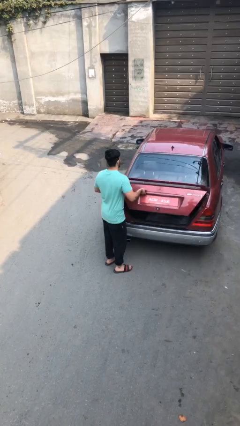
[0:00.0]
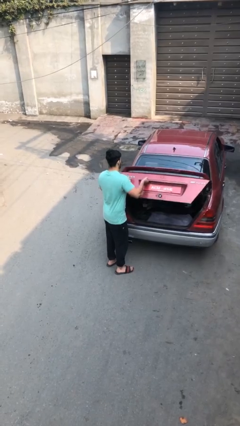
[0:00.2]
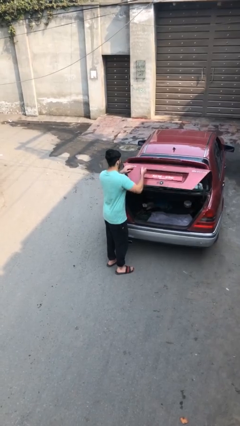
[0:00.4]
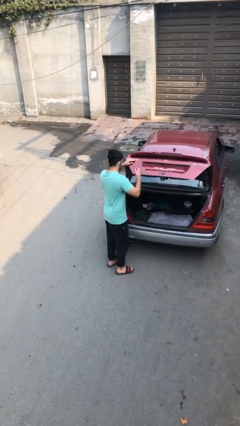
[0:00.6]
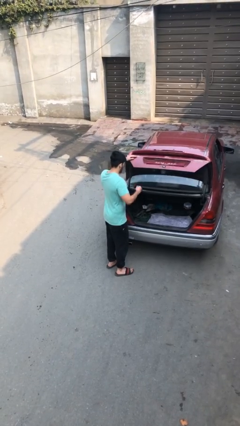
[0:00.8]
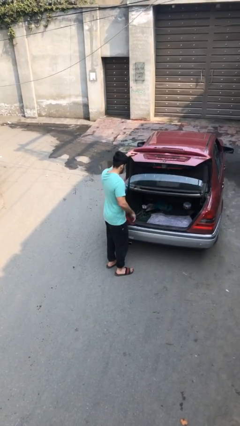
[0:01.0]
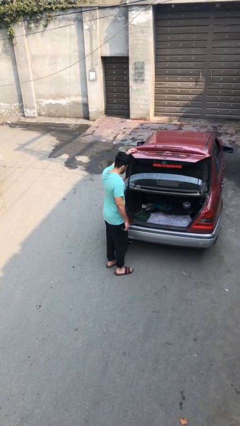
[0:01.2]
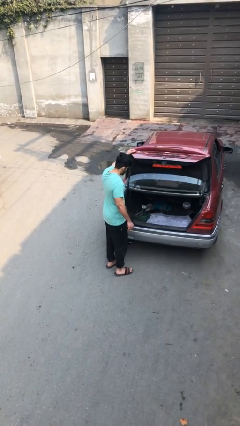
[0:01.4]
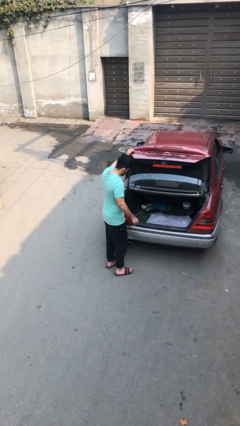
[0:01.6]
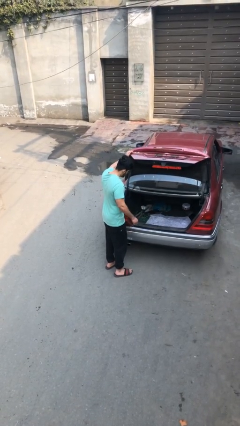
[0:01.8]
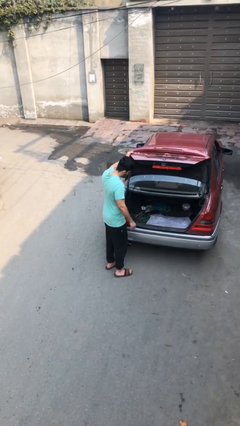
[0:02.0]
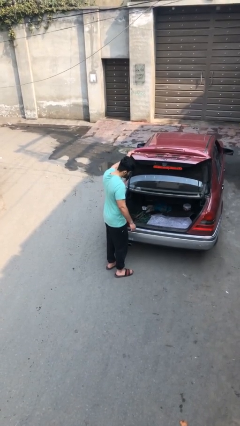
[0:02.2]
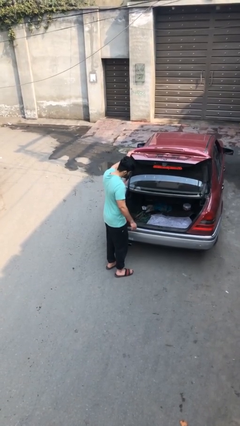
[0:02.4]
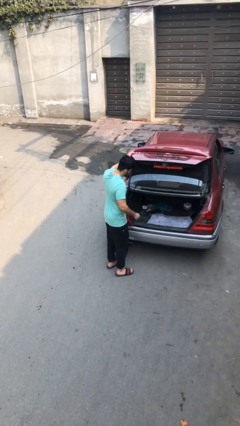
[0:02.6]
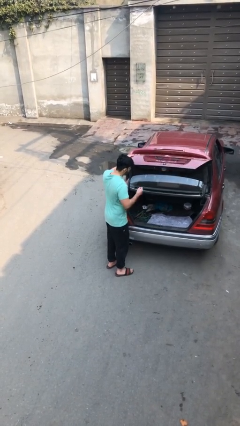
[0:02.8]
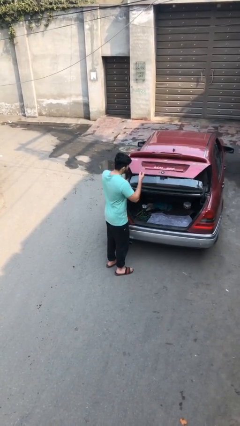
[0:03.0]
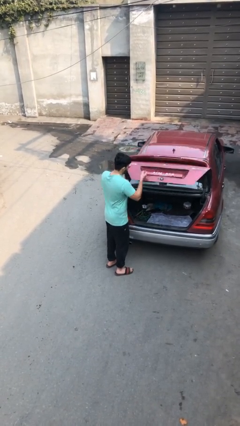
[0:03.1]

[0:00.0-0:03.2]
person opens car trunk

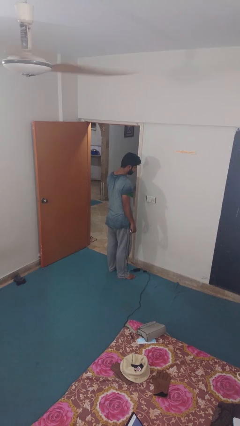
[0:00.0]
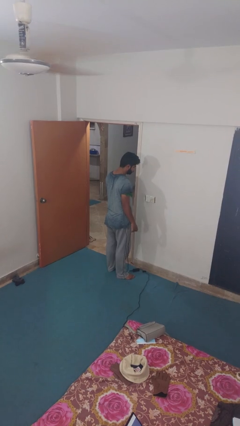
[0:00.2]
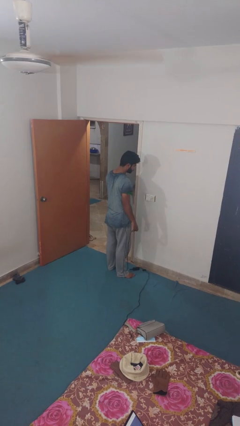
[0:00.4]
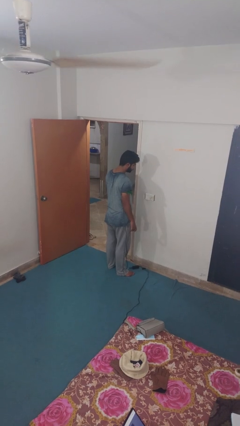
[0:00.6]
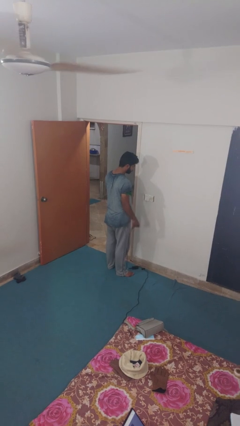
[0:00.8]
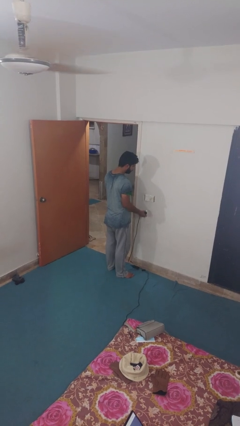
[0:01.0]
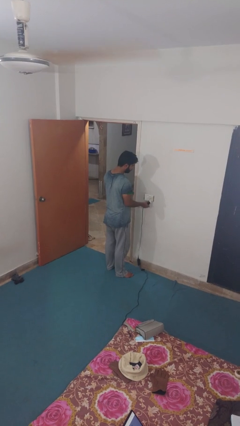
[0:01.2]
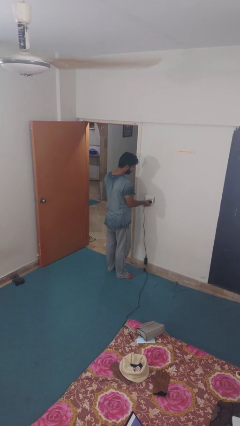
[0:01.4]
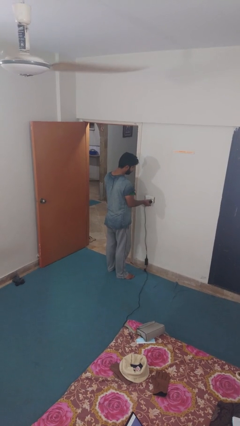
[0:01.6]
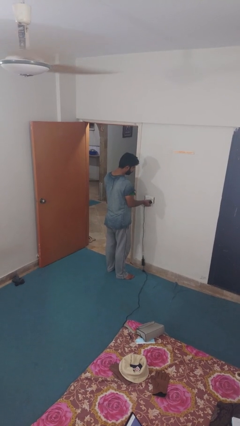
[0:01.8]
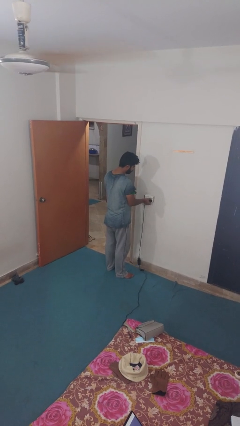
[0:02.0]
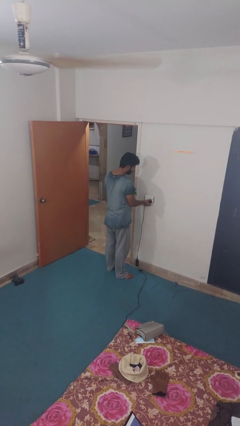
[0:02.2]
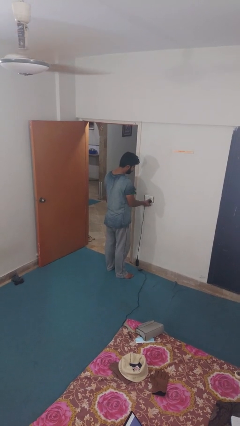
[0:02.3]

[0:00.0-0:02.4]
person plugs into electrical socket

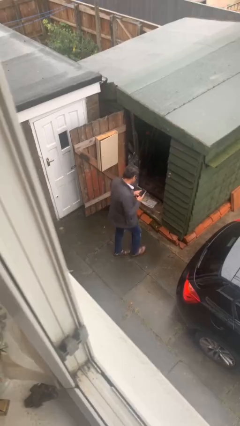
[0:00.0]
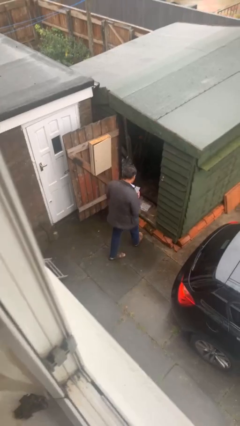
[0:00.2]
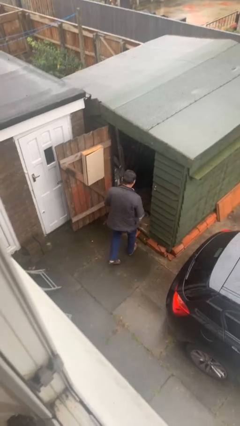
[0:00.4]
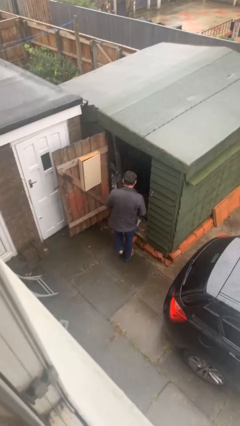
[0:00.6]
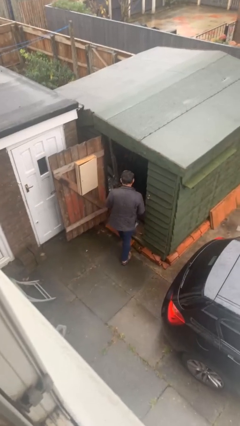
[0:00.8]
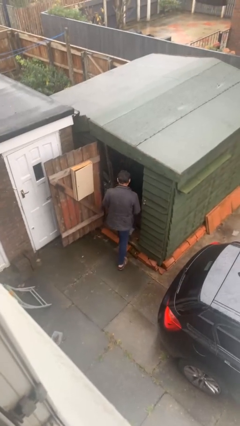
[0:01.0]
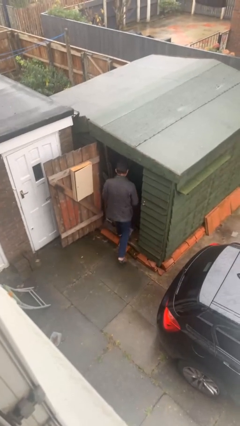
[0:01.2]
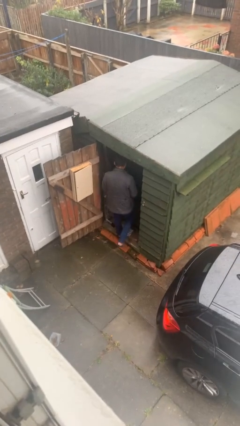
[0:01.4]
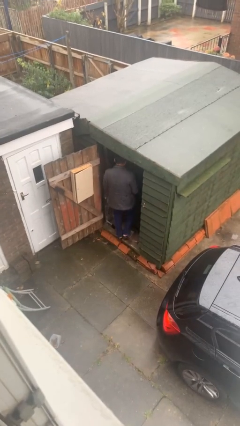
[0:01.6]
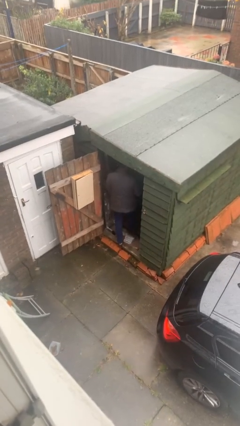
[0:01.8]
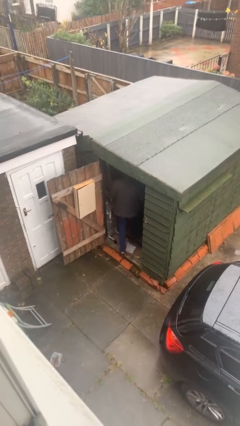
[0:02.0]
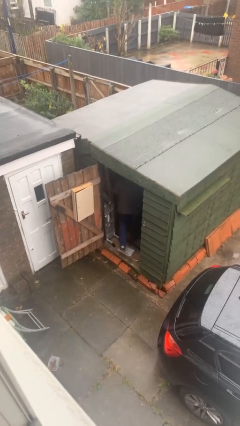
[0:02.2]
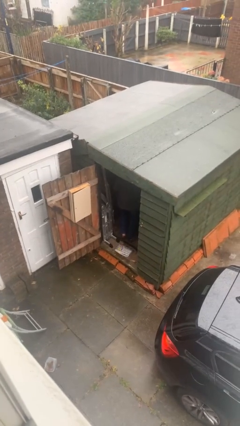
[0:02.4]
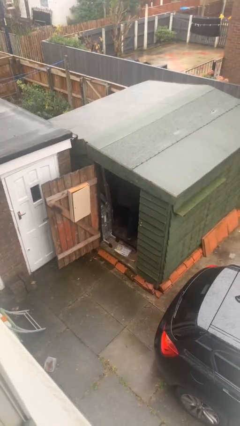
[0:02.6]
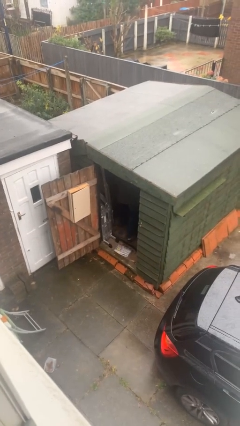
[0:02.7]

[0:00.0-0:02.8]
person exits scene through structure

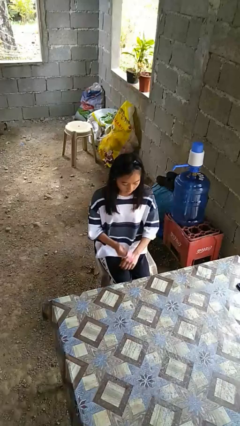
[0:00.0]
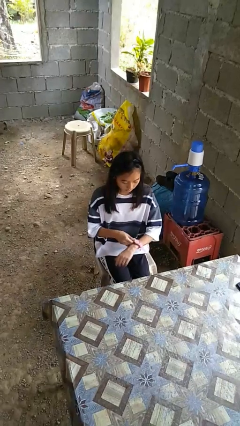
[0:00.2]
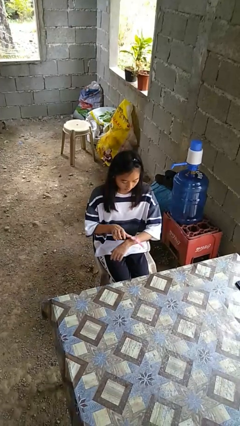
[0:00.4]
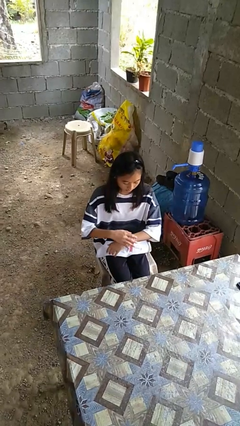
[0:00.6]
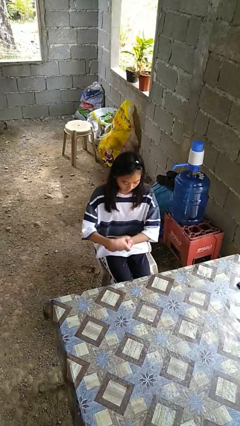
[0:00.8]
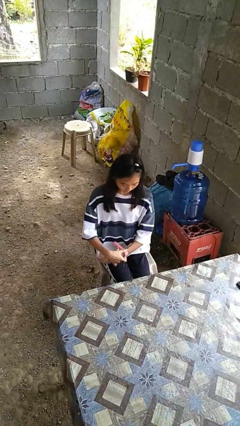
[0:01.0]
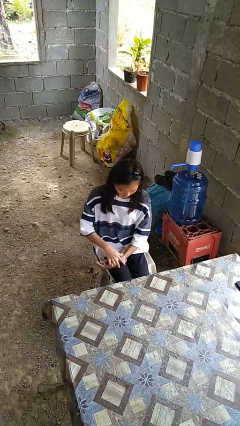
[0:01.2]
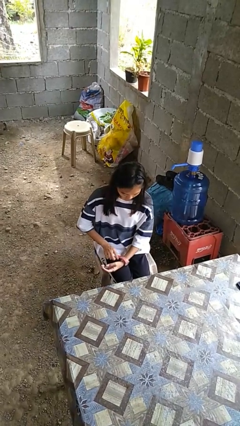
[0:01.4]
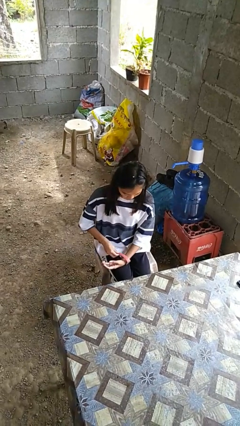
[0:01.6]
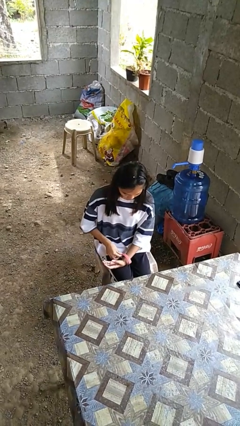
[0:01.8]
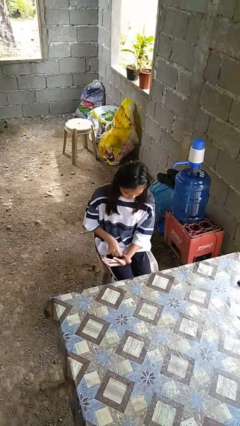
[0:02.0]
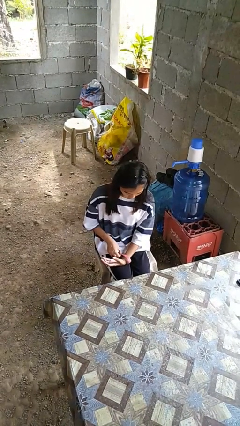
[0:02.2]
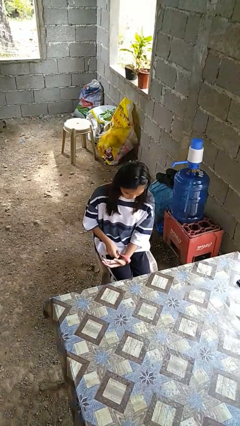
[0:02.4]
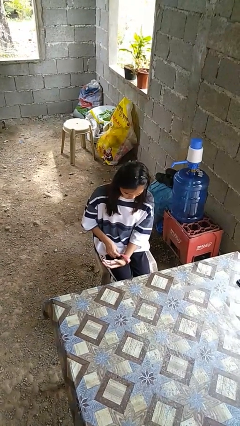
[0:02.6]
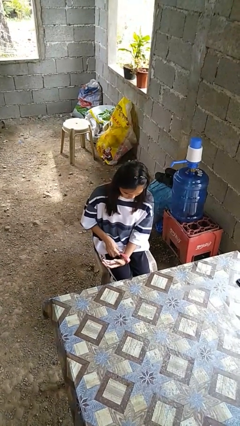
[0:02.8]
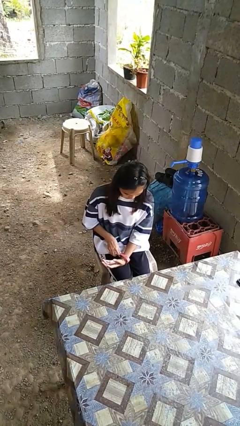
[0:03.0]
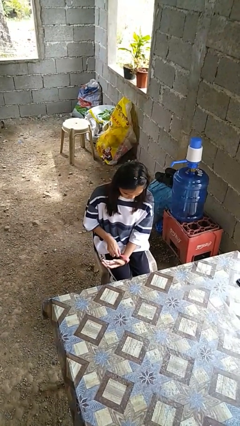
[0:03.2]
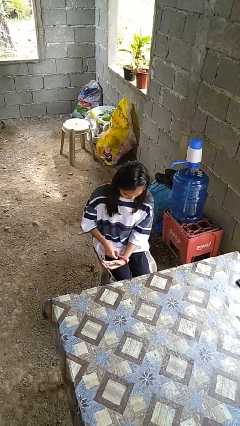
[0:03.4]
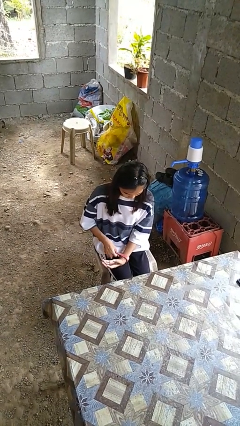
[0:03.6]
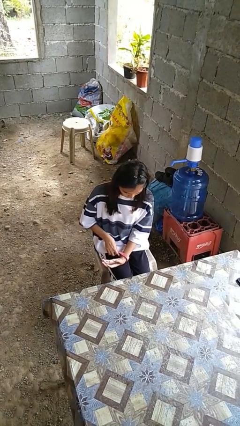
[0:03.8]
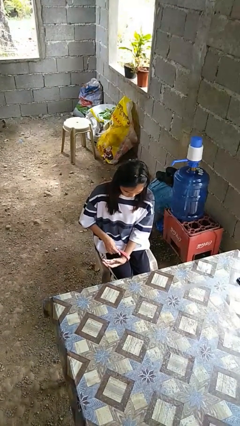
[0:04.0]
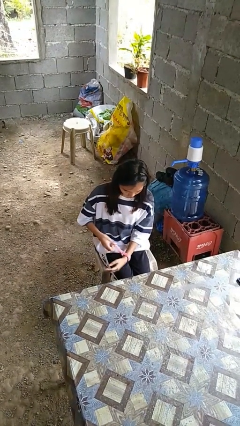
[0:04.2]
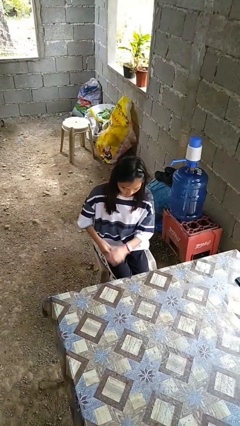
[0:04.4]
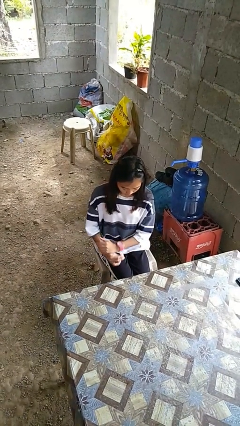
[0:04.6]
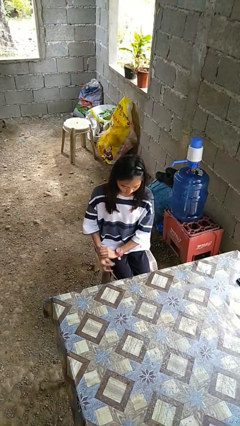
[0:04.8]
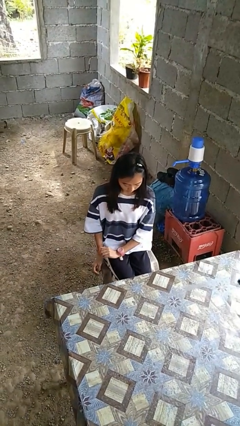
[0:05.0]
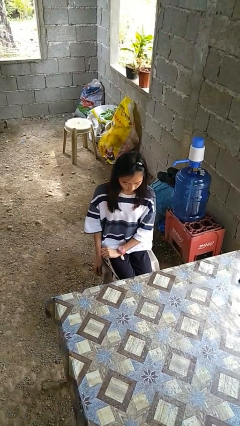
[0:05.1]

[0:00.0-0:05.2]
person puts on wristwatch

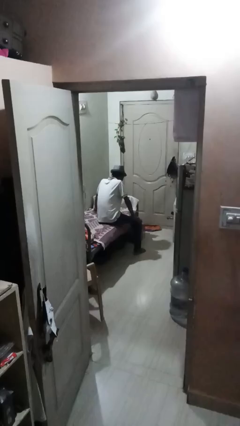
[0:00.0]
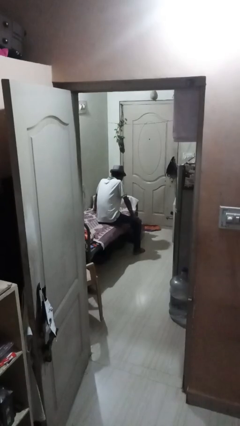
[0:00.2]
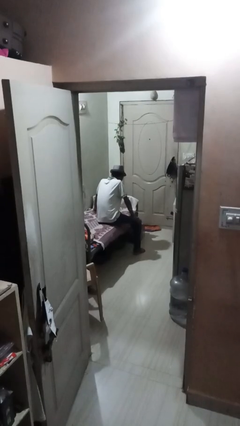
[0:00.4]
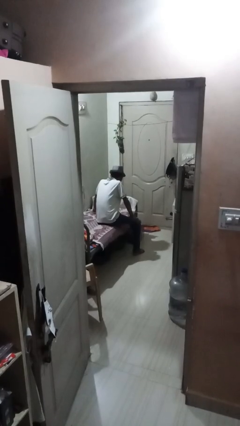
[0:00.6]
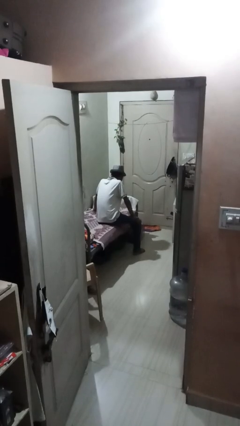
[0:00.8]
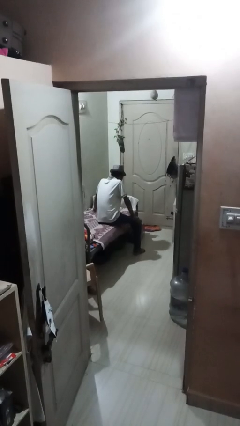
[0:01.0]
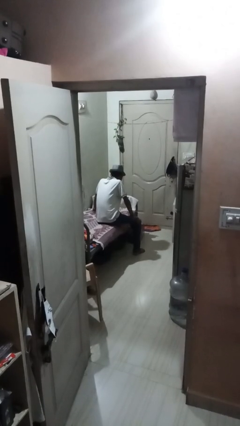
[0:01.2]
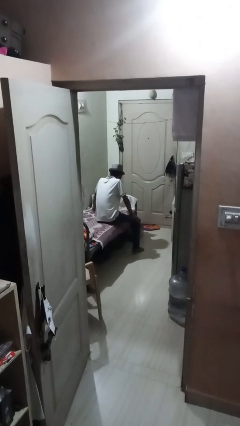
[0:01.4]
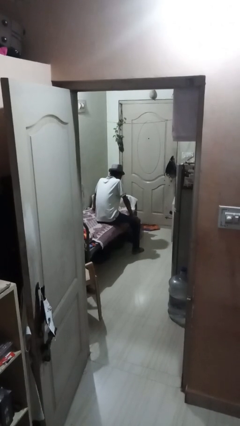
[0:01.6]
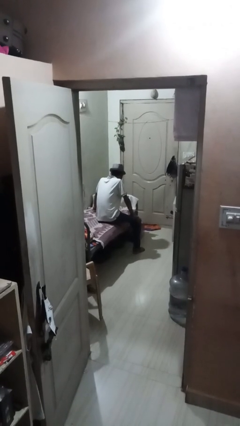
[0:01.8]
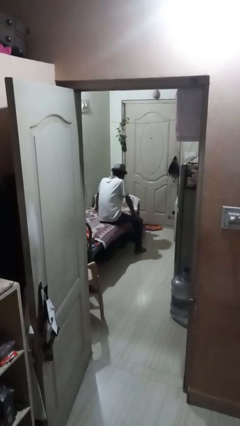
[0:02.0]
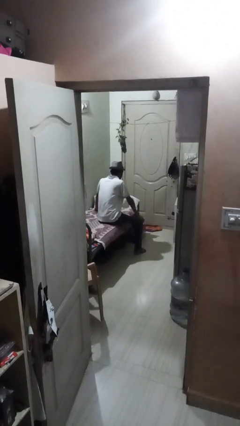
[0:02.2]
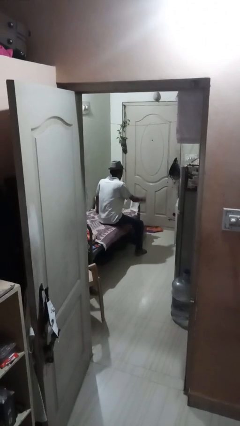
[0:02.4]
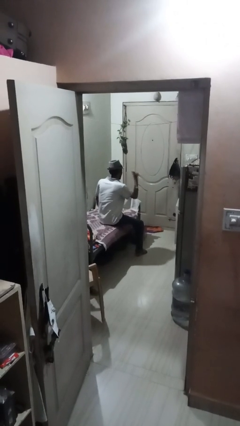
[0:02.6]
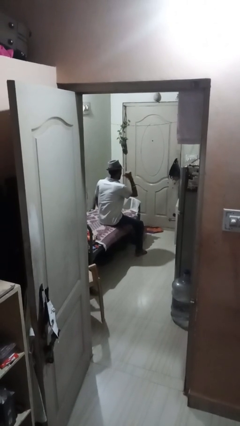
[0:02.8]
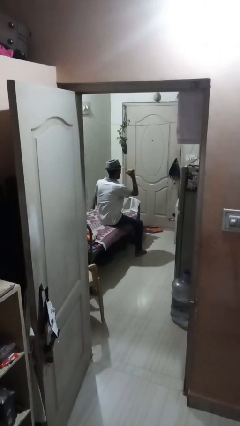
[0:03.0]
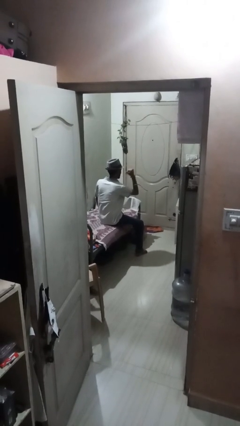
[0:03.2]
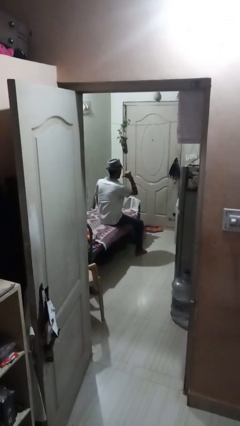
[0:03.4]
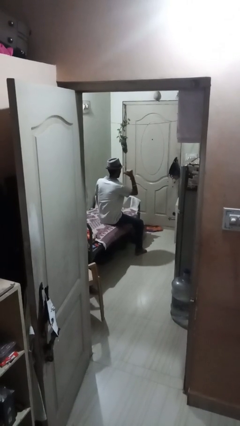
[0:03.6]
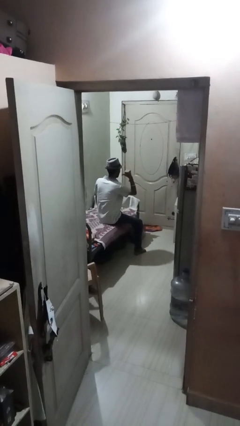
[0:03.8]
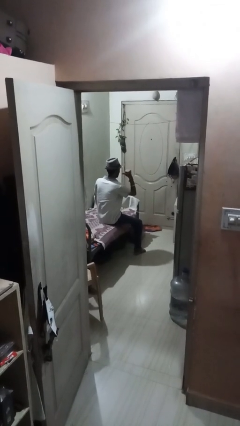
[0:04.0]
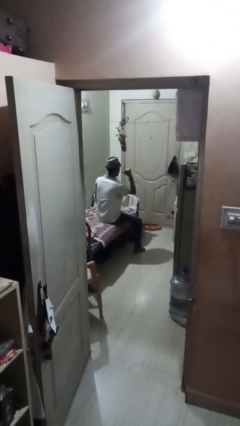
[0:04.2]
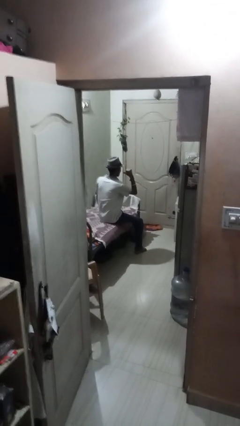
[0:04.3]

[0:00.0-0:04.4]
person gestures behind me
